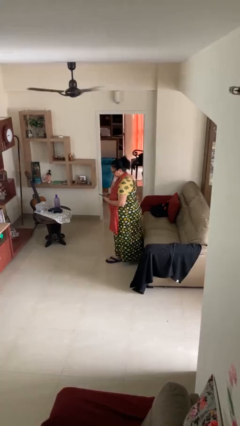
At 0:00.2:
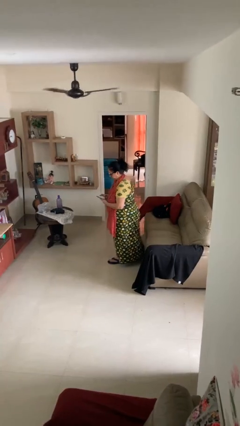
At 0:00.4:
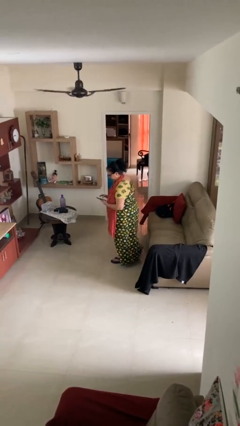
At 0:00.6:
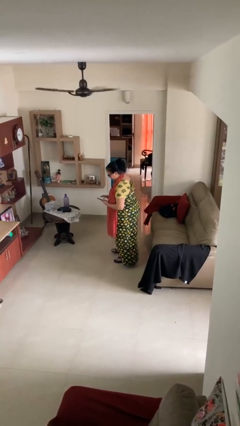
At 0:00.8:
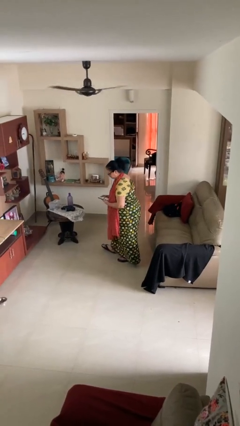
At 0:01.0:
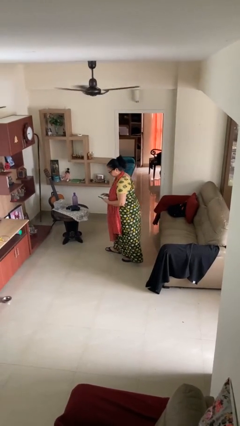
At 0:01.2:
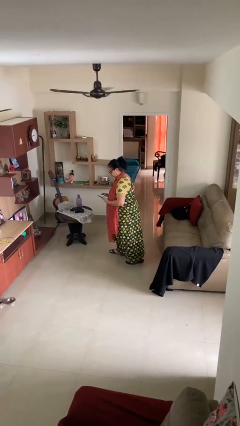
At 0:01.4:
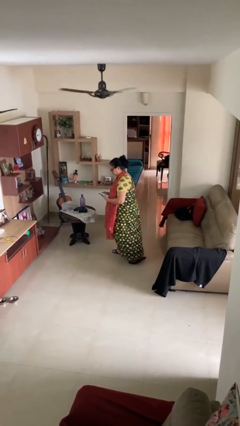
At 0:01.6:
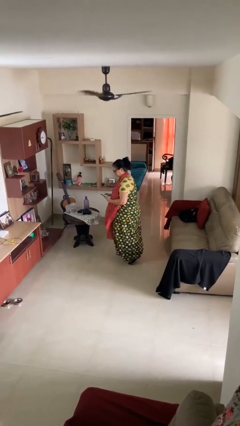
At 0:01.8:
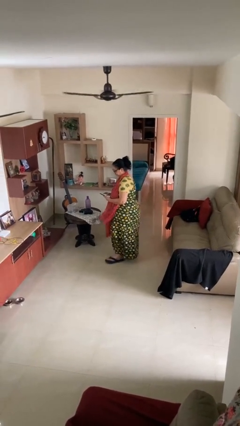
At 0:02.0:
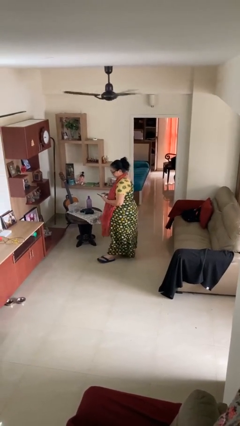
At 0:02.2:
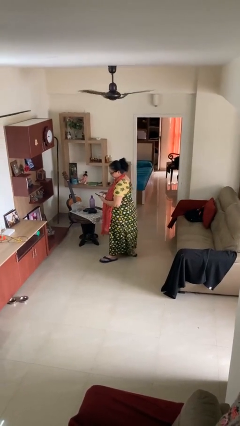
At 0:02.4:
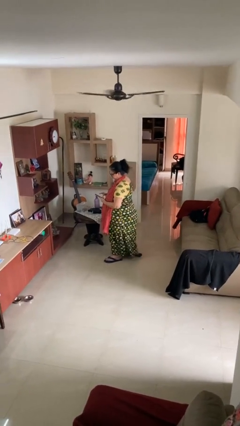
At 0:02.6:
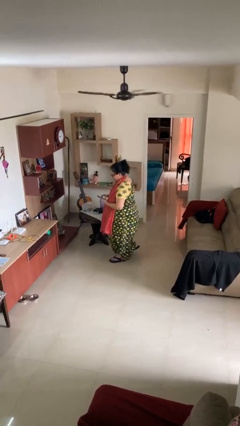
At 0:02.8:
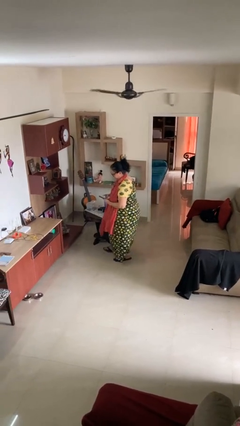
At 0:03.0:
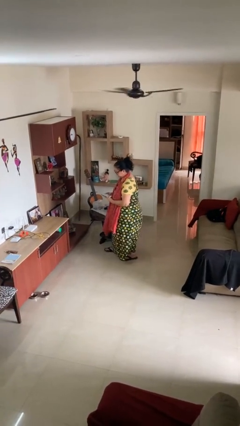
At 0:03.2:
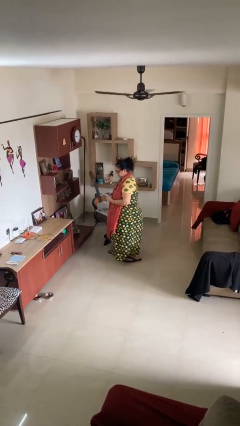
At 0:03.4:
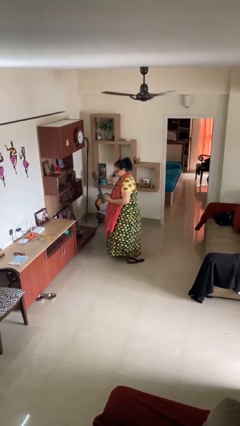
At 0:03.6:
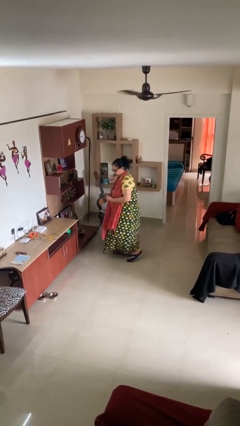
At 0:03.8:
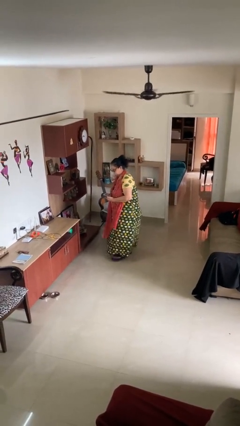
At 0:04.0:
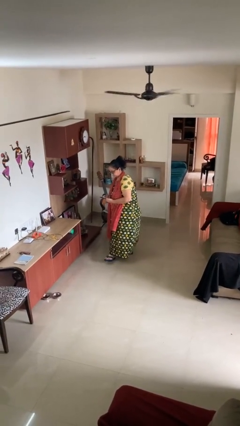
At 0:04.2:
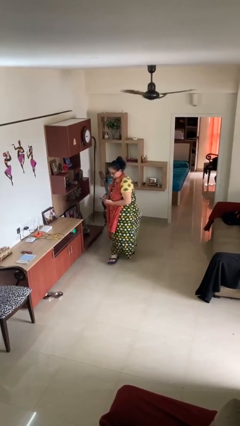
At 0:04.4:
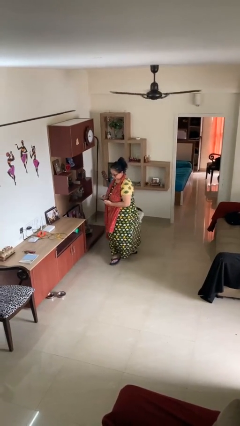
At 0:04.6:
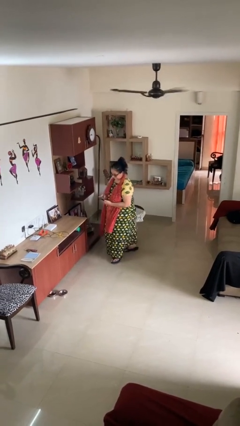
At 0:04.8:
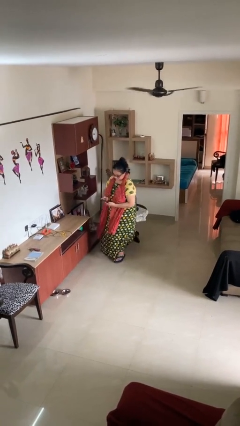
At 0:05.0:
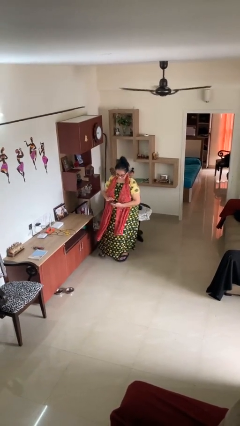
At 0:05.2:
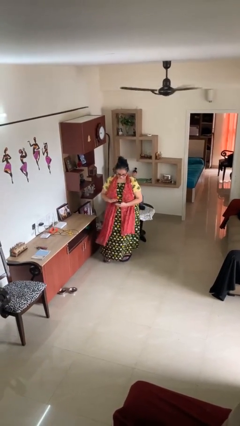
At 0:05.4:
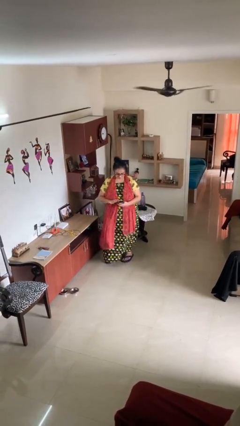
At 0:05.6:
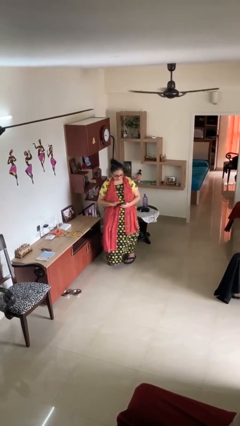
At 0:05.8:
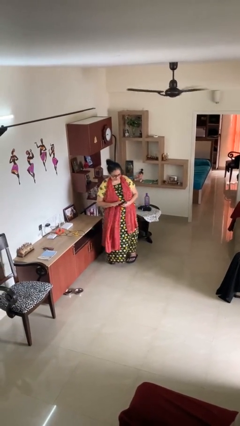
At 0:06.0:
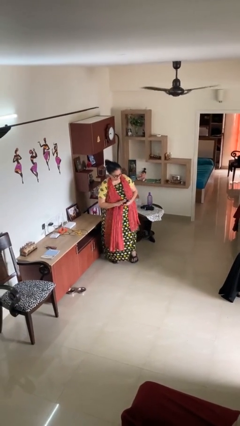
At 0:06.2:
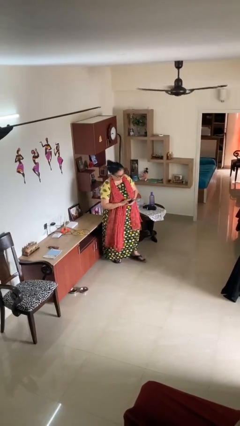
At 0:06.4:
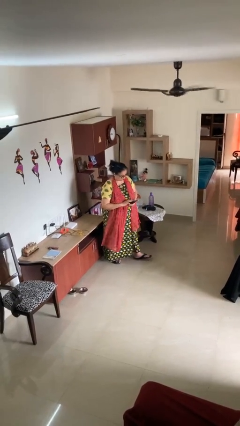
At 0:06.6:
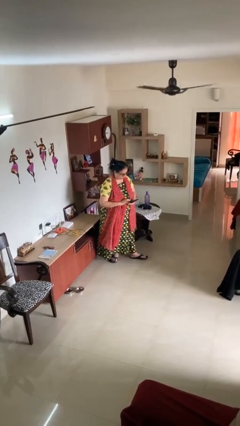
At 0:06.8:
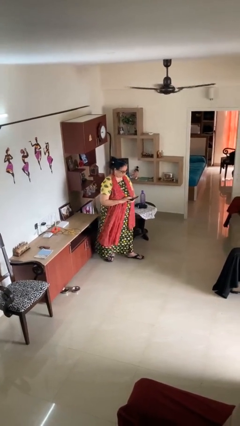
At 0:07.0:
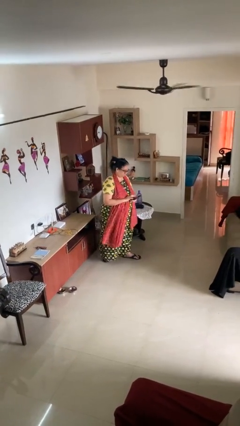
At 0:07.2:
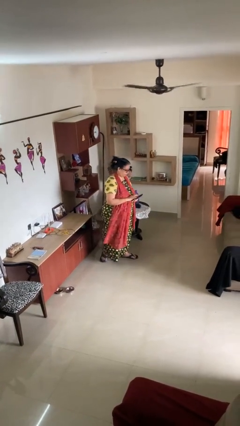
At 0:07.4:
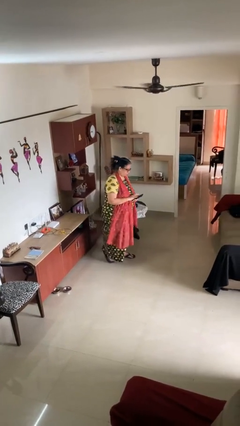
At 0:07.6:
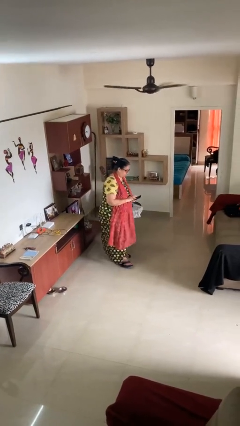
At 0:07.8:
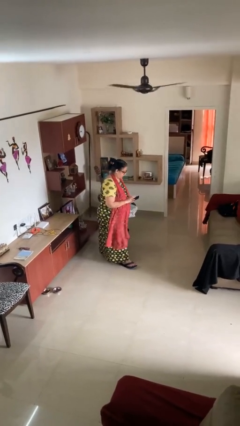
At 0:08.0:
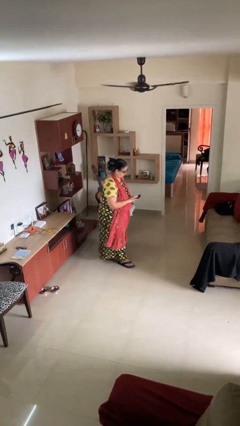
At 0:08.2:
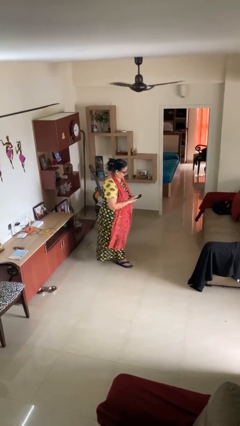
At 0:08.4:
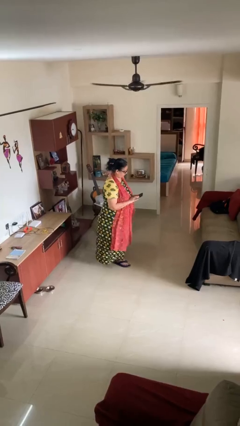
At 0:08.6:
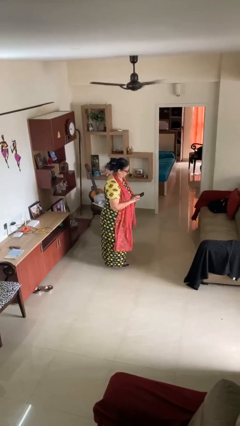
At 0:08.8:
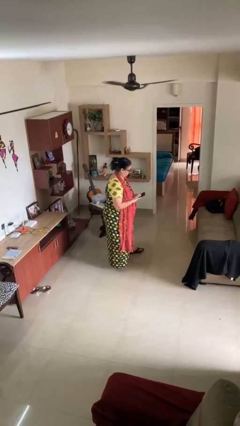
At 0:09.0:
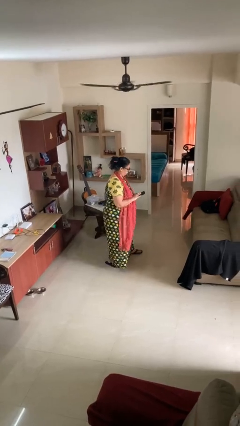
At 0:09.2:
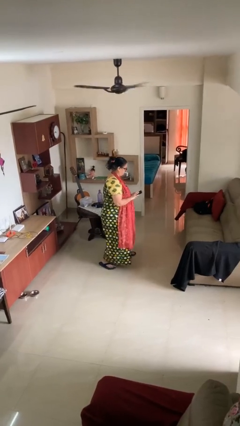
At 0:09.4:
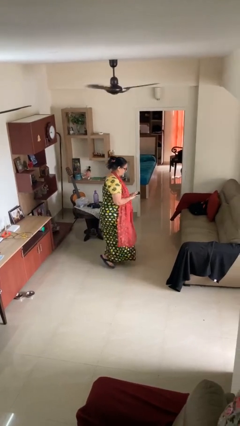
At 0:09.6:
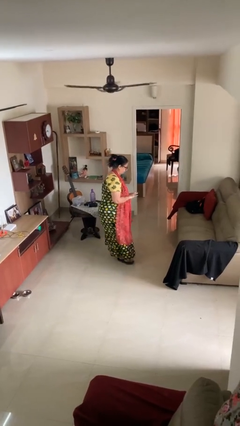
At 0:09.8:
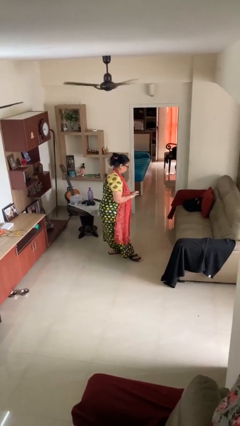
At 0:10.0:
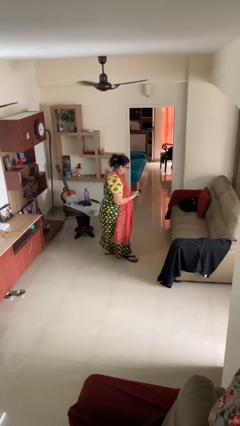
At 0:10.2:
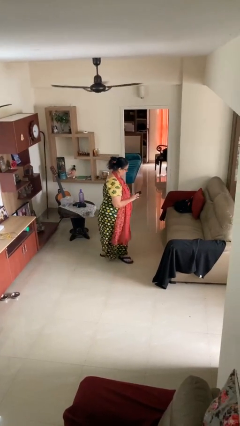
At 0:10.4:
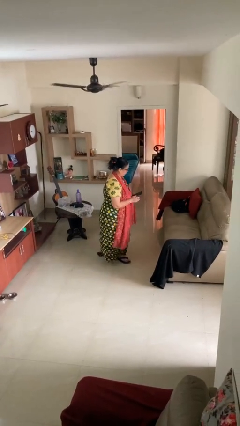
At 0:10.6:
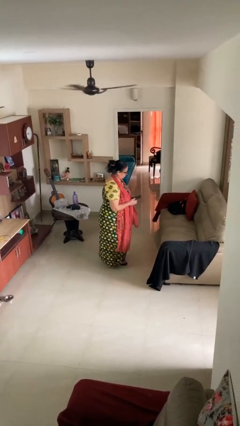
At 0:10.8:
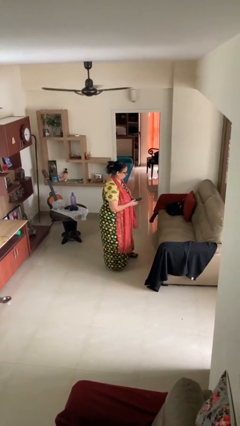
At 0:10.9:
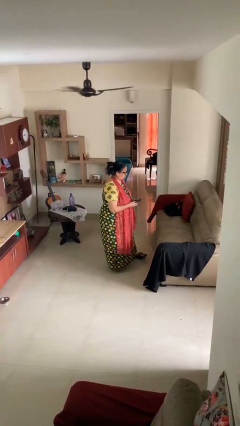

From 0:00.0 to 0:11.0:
person texts on phone
